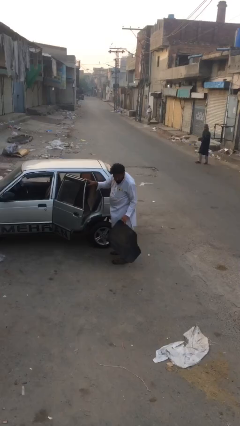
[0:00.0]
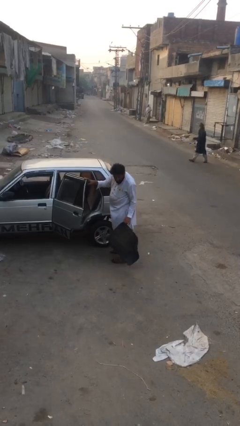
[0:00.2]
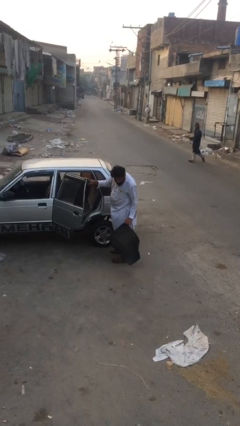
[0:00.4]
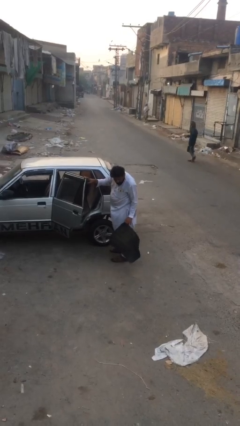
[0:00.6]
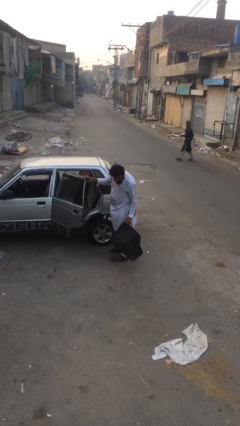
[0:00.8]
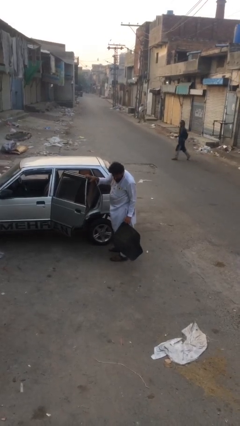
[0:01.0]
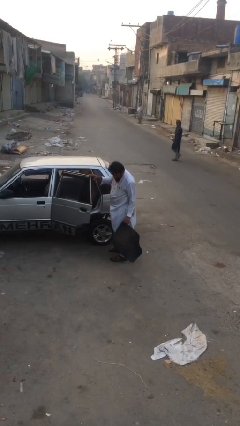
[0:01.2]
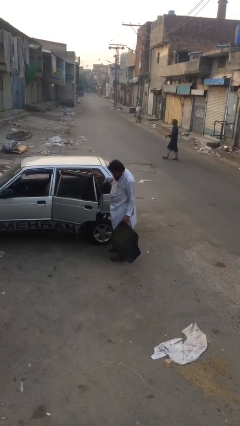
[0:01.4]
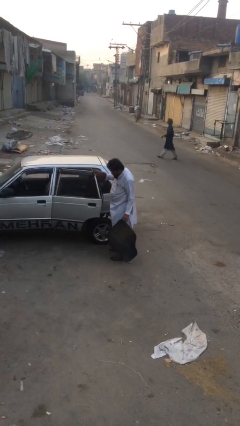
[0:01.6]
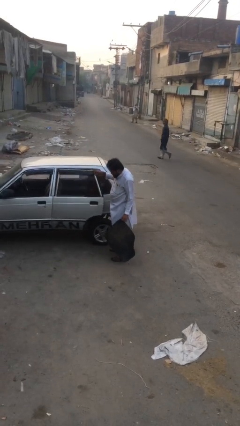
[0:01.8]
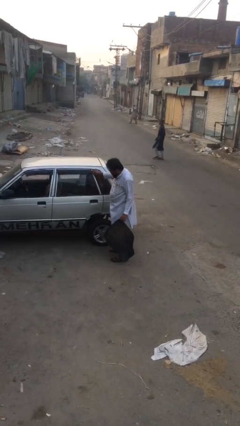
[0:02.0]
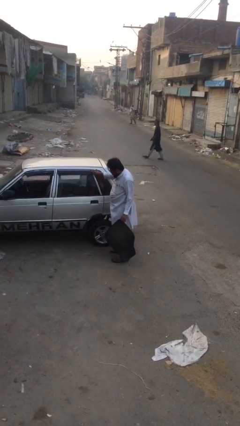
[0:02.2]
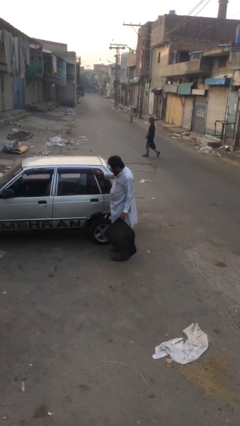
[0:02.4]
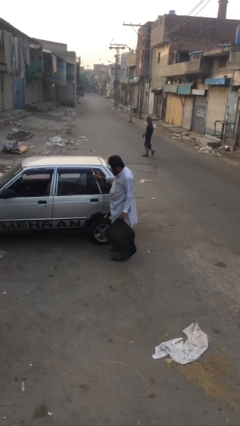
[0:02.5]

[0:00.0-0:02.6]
person closes car door

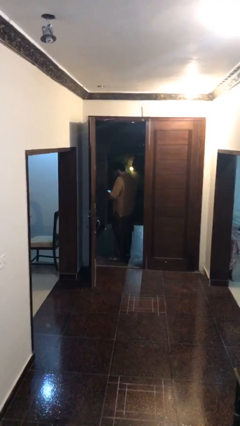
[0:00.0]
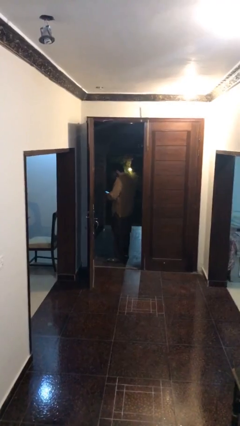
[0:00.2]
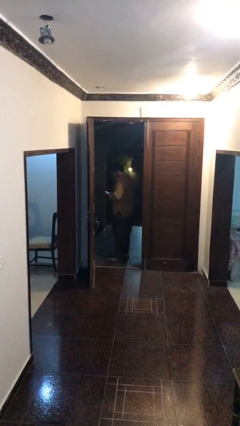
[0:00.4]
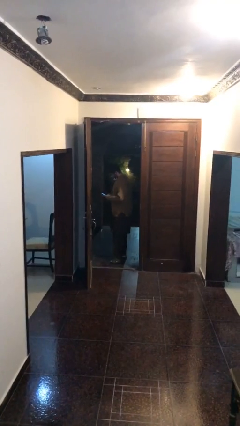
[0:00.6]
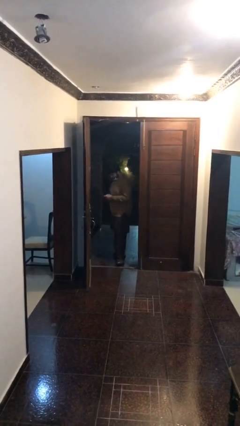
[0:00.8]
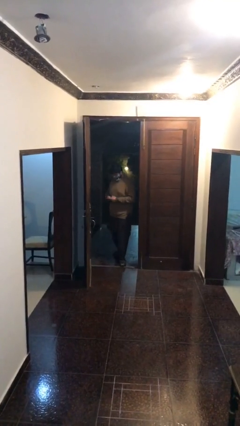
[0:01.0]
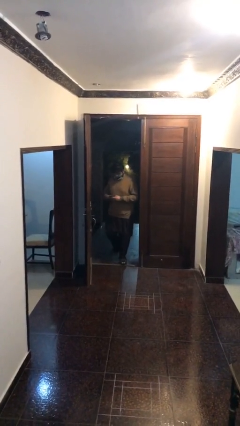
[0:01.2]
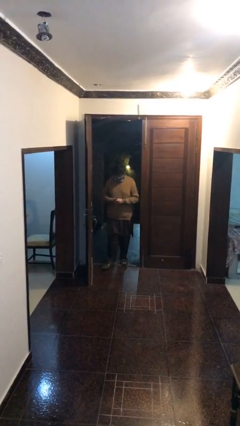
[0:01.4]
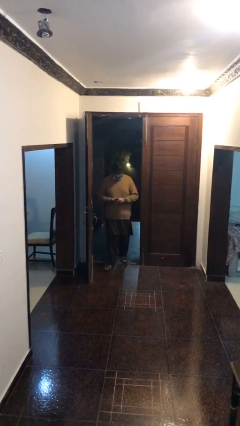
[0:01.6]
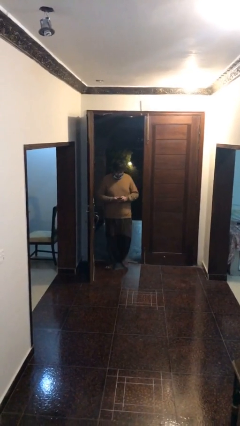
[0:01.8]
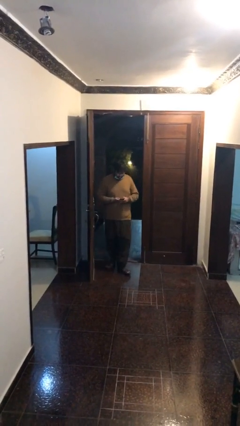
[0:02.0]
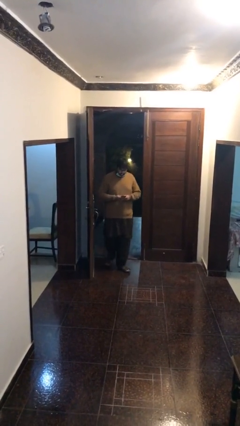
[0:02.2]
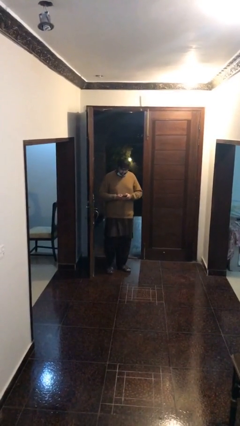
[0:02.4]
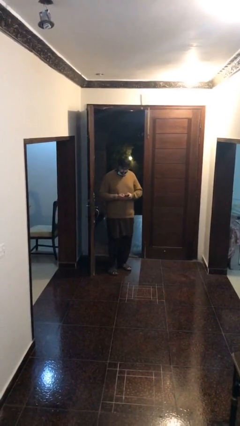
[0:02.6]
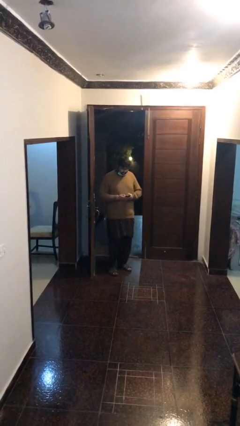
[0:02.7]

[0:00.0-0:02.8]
person enters scene through structure

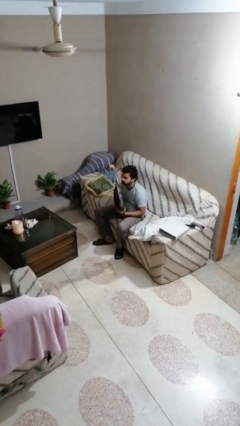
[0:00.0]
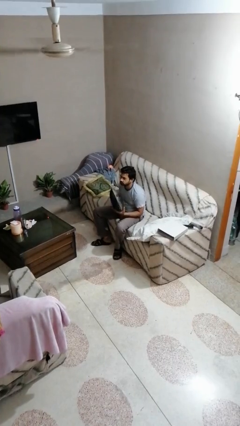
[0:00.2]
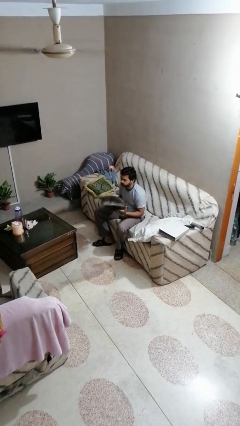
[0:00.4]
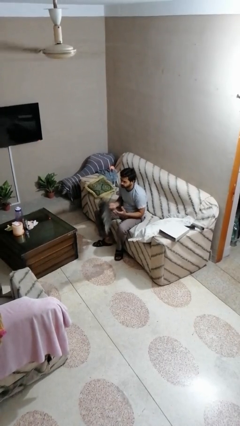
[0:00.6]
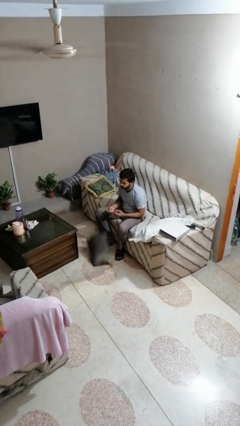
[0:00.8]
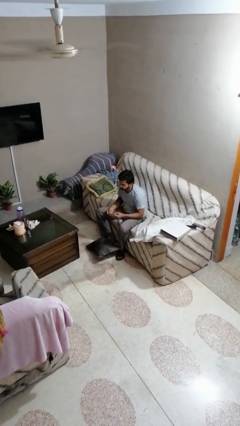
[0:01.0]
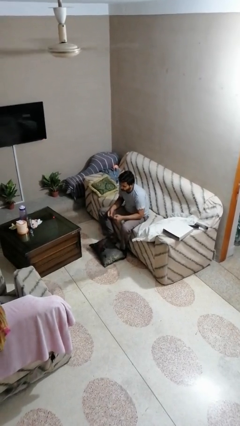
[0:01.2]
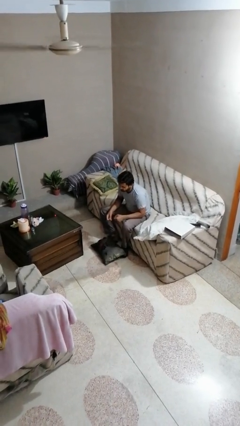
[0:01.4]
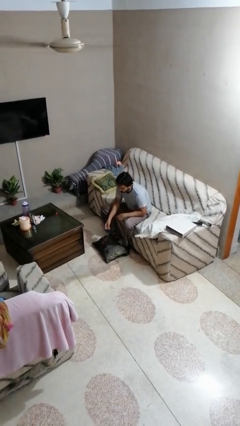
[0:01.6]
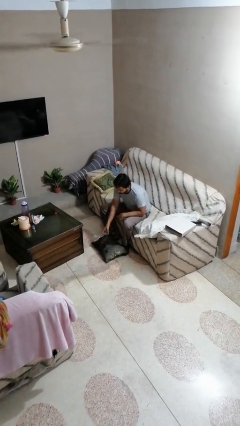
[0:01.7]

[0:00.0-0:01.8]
person drops object

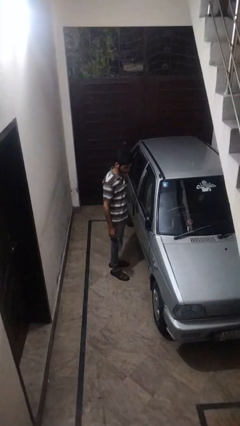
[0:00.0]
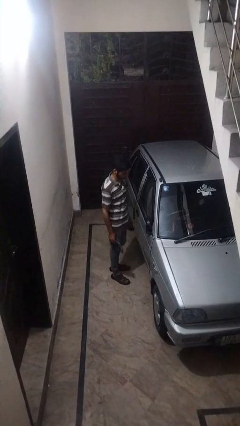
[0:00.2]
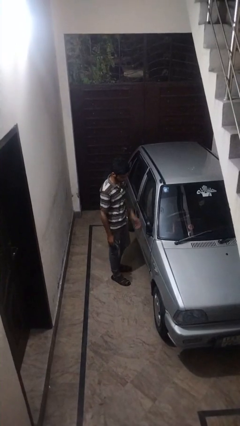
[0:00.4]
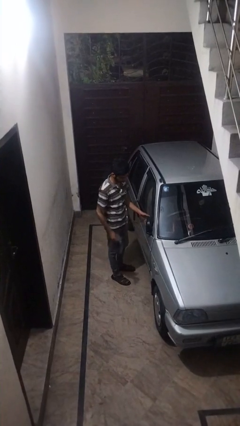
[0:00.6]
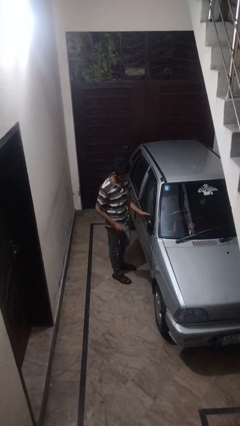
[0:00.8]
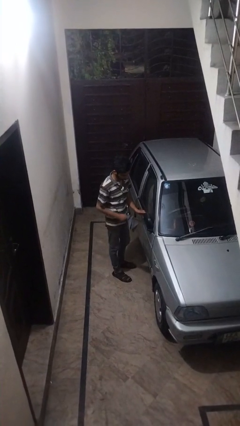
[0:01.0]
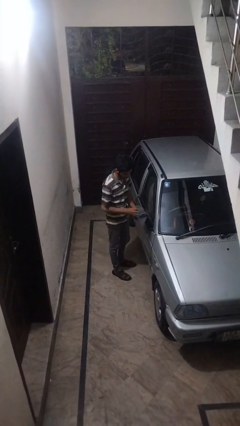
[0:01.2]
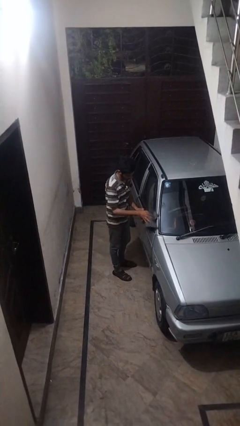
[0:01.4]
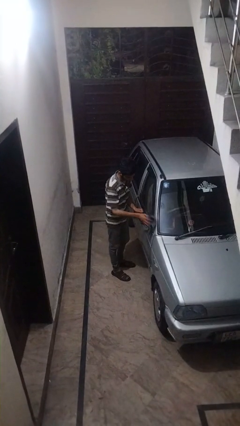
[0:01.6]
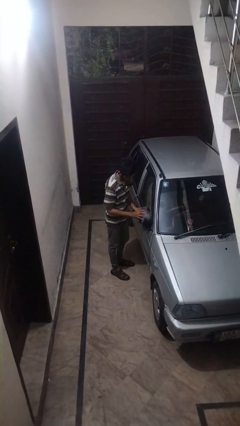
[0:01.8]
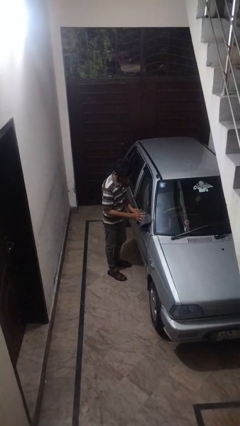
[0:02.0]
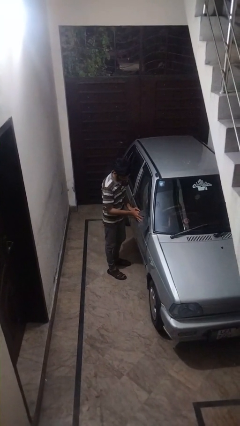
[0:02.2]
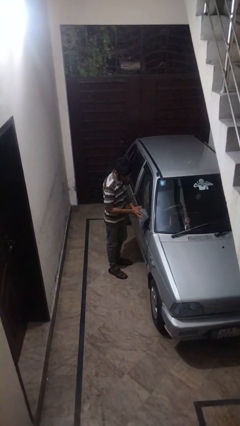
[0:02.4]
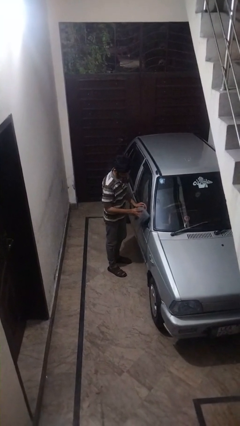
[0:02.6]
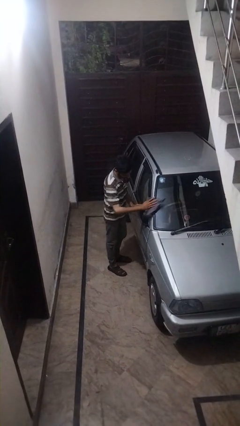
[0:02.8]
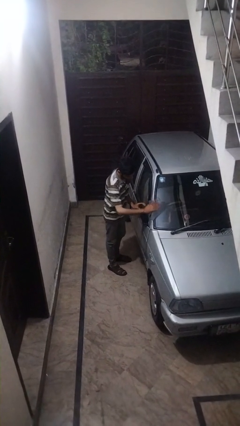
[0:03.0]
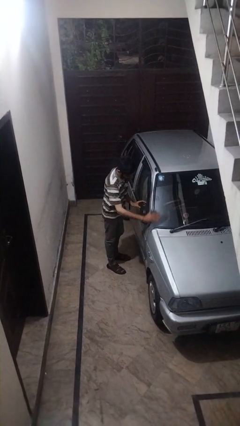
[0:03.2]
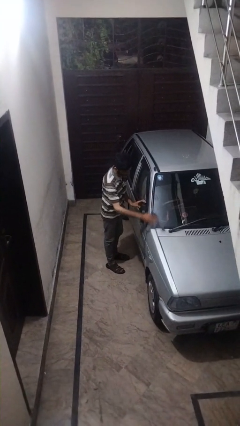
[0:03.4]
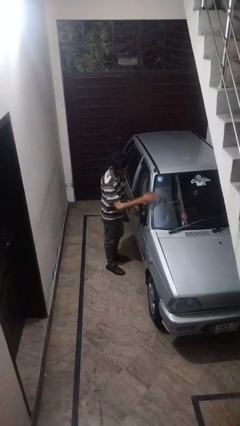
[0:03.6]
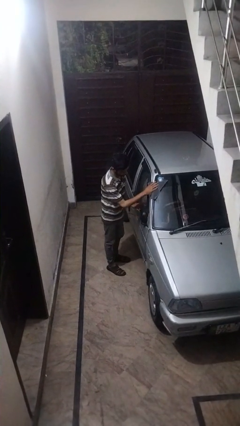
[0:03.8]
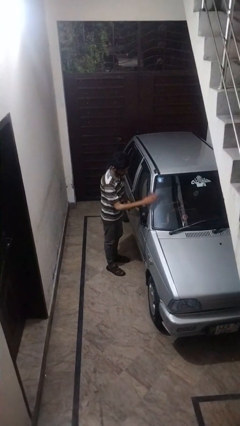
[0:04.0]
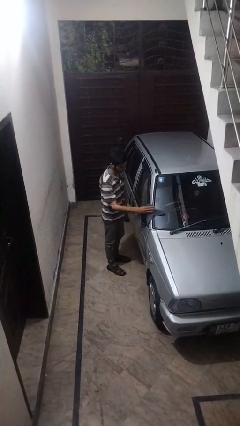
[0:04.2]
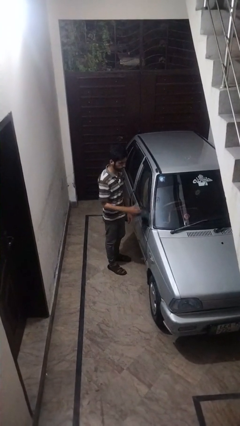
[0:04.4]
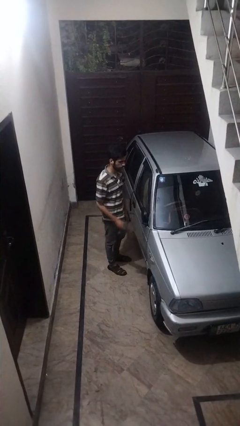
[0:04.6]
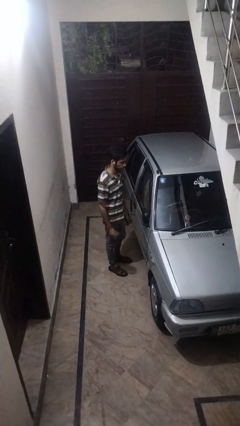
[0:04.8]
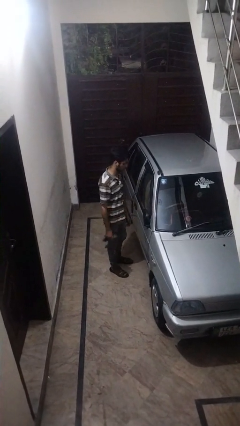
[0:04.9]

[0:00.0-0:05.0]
person polishes car with rag

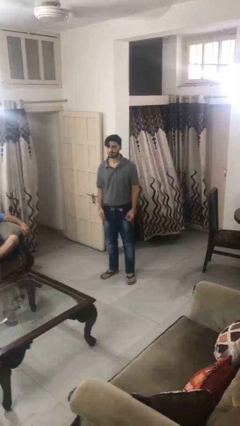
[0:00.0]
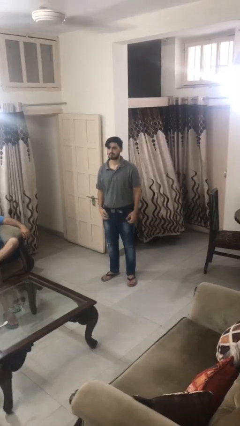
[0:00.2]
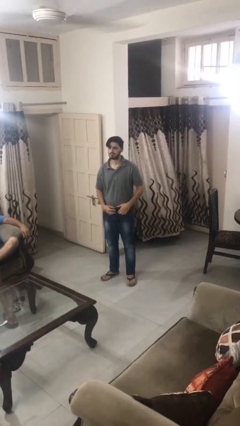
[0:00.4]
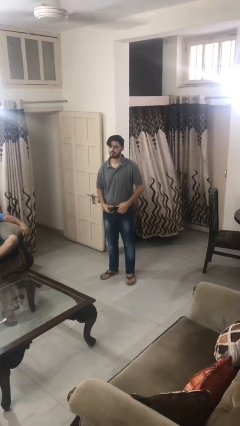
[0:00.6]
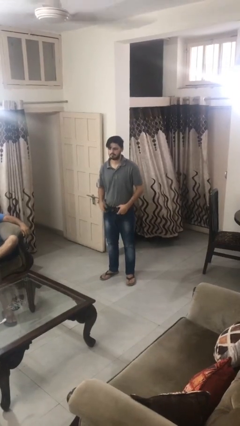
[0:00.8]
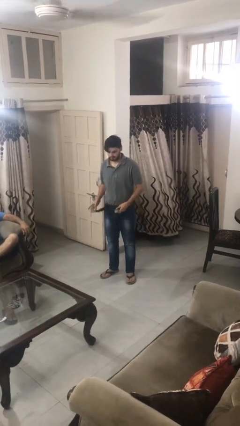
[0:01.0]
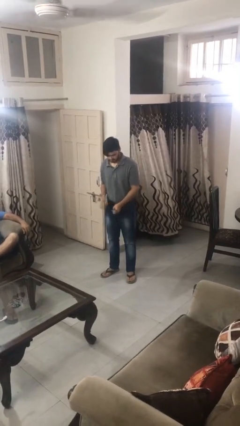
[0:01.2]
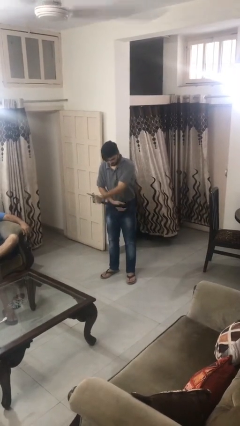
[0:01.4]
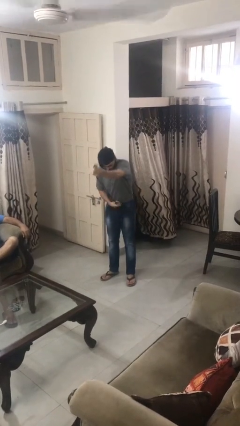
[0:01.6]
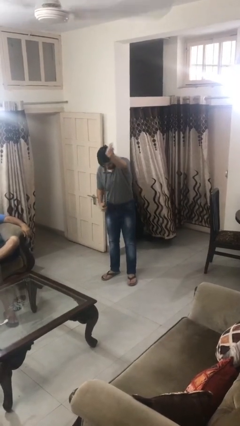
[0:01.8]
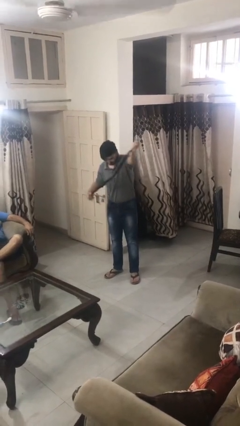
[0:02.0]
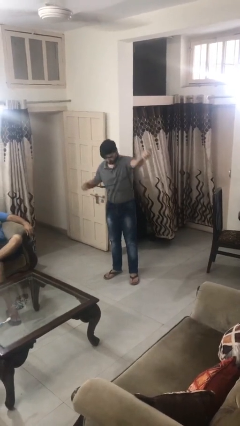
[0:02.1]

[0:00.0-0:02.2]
person takes off belt

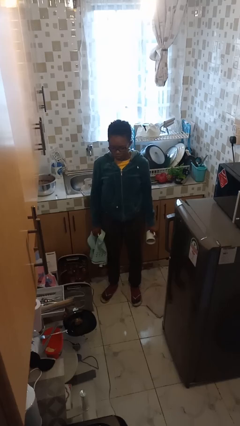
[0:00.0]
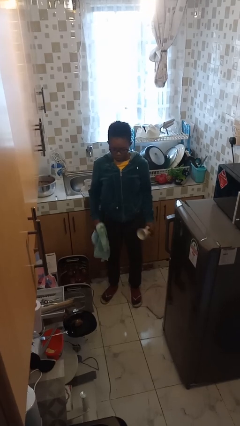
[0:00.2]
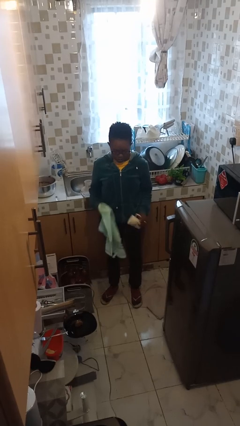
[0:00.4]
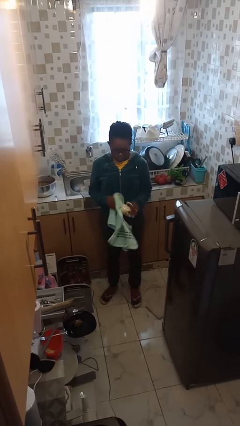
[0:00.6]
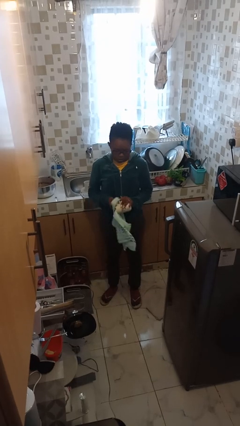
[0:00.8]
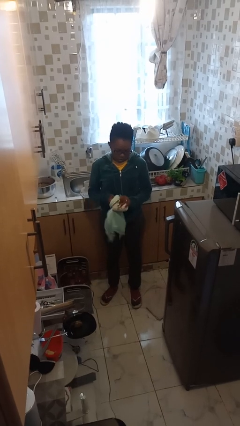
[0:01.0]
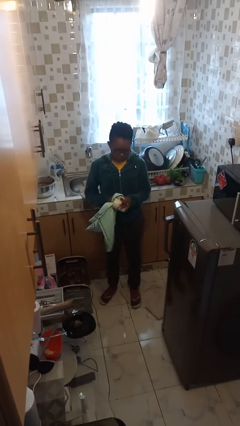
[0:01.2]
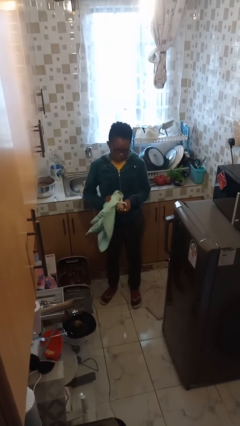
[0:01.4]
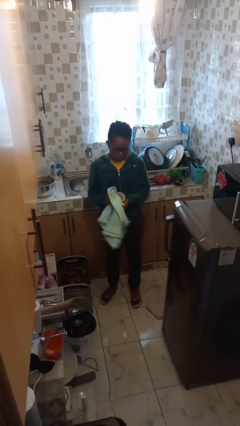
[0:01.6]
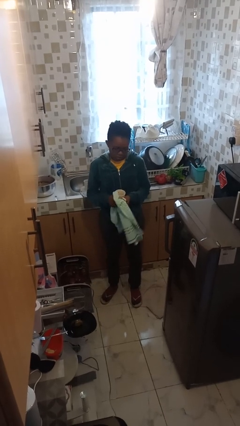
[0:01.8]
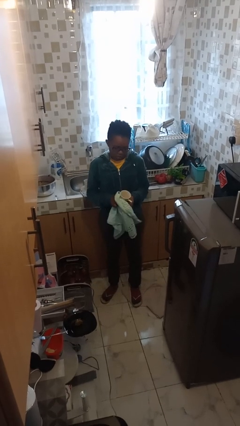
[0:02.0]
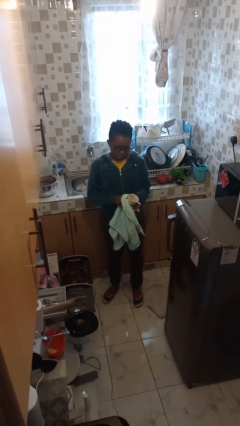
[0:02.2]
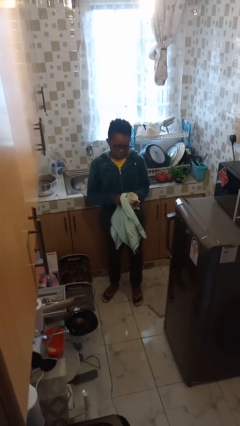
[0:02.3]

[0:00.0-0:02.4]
person dries dish

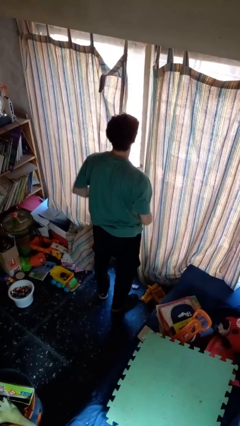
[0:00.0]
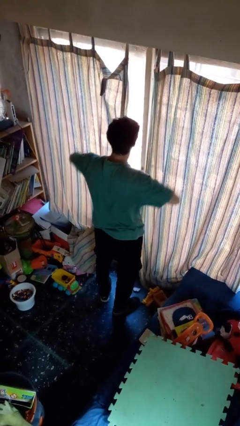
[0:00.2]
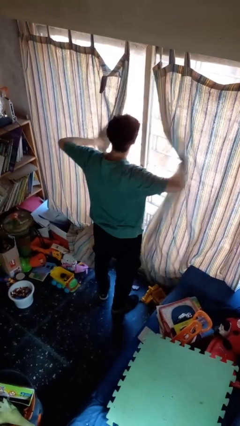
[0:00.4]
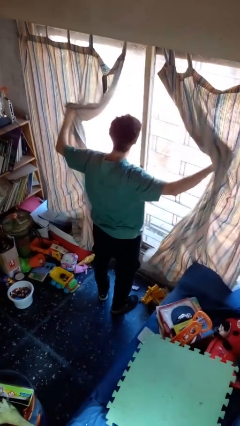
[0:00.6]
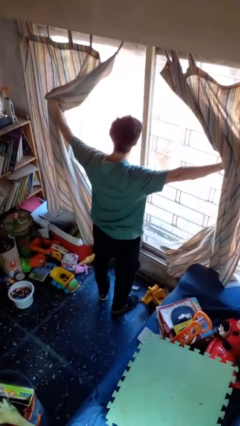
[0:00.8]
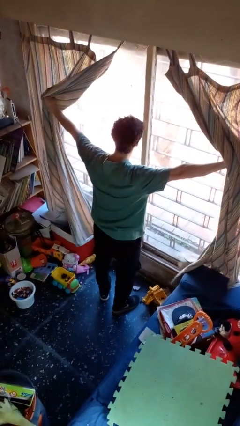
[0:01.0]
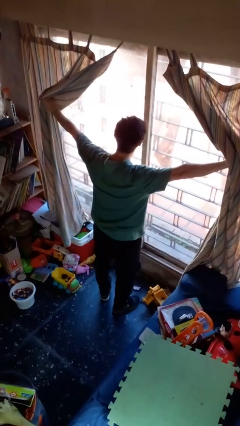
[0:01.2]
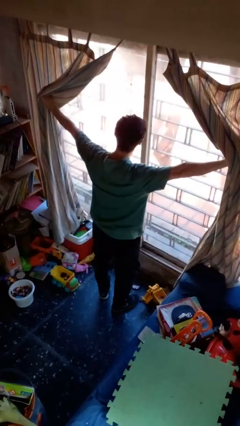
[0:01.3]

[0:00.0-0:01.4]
person opens curtains
